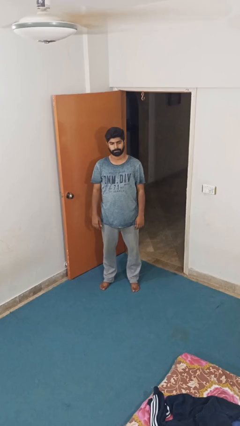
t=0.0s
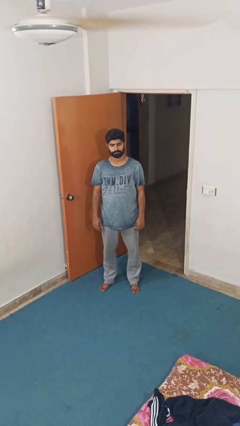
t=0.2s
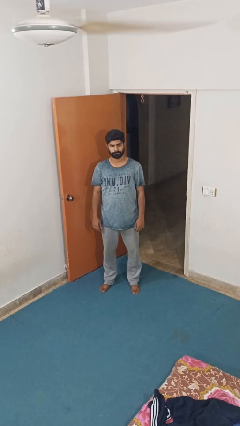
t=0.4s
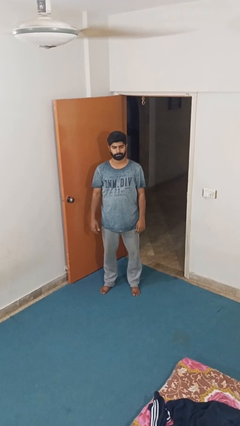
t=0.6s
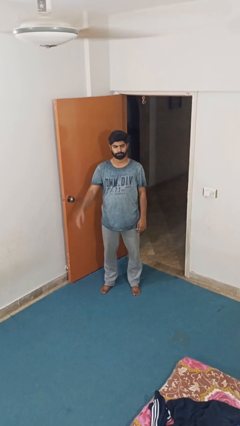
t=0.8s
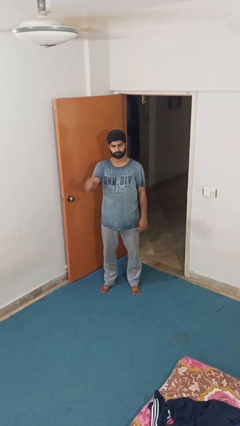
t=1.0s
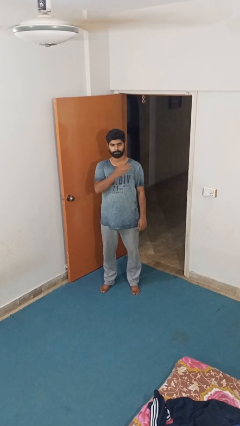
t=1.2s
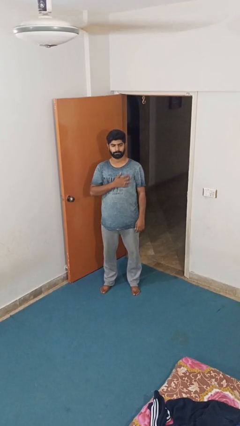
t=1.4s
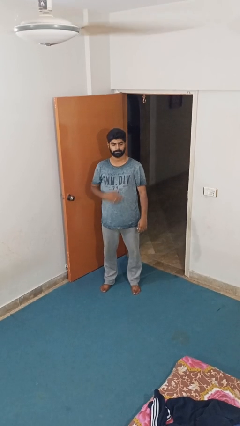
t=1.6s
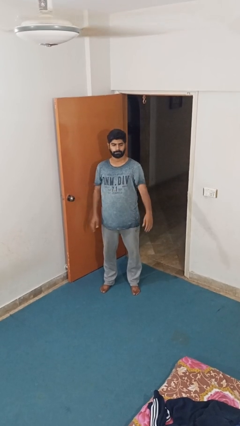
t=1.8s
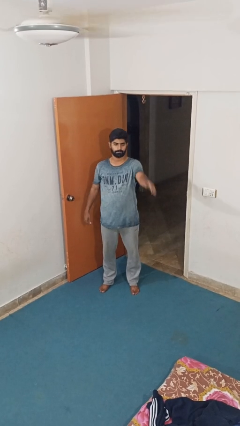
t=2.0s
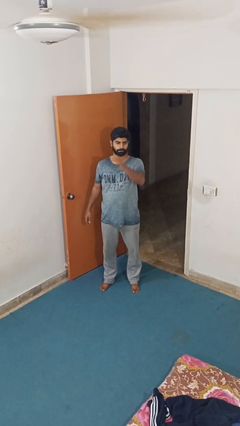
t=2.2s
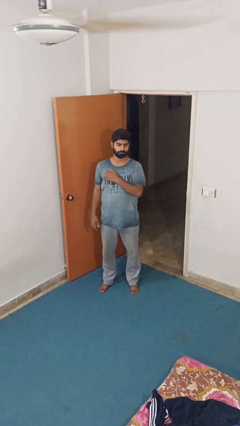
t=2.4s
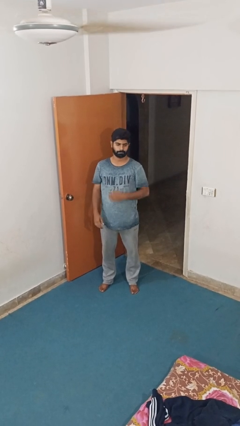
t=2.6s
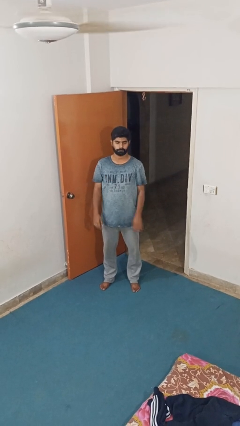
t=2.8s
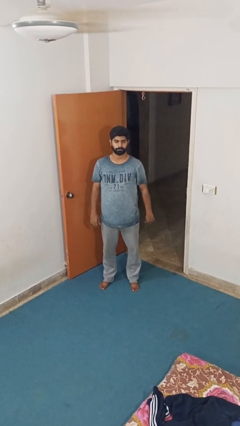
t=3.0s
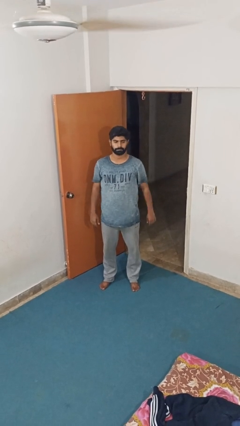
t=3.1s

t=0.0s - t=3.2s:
person drums on chest

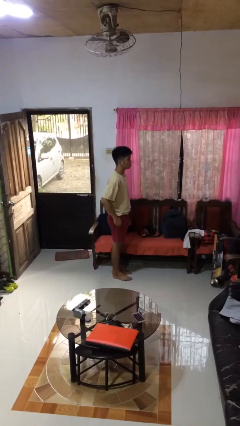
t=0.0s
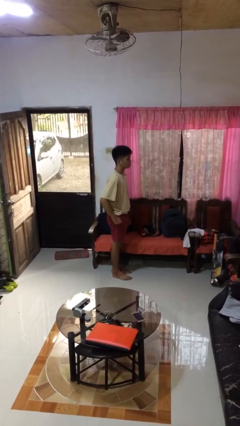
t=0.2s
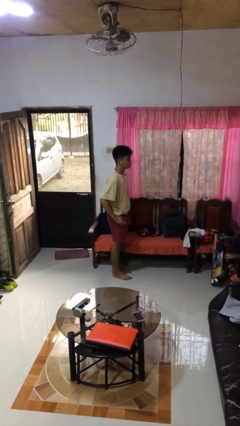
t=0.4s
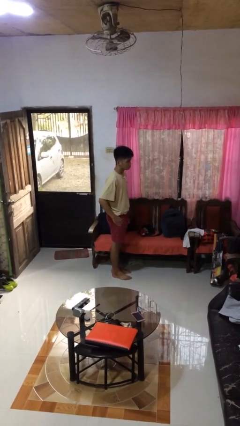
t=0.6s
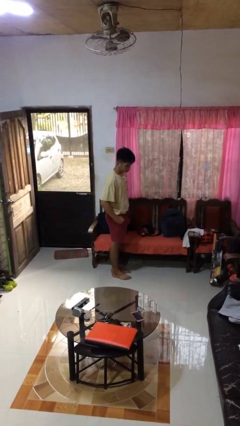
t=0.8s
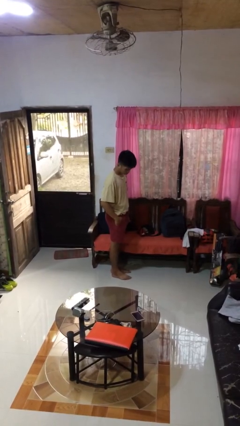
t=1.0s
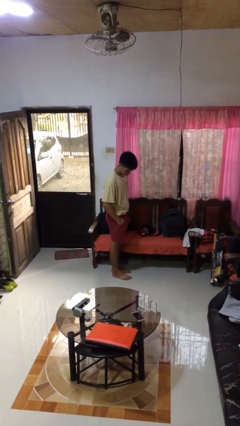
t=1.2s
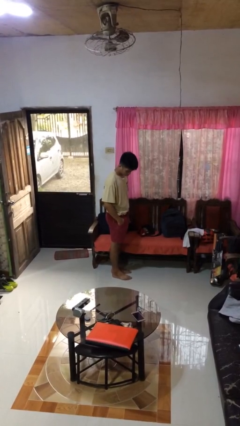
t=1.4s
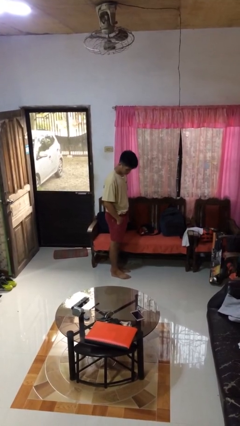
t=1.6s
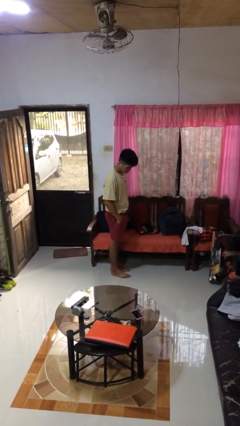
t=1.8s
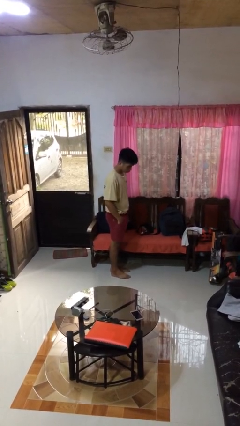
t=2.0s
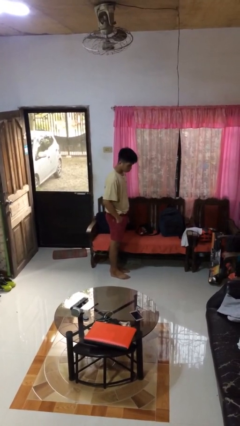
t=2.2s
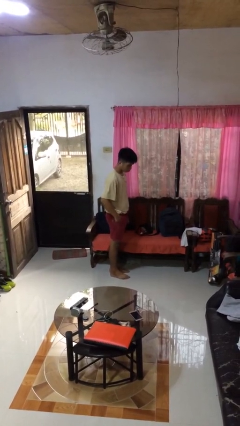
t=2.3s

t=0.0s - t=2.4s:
person puts hands in back pockets

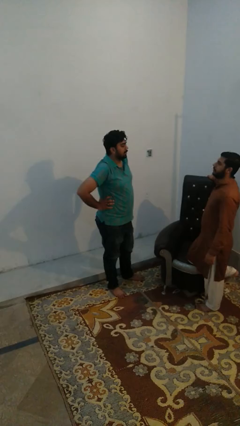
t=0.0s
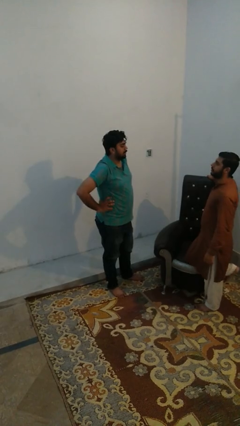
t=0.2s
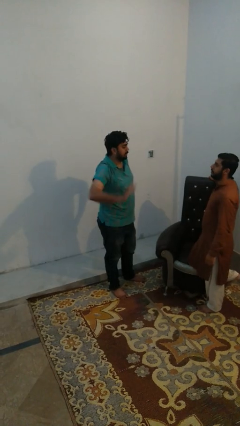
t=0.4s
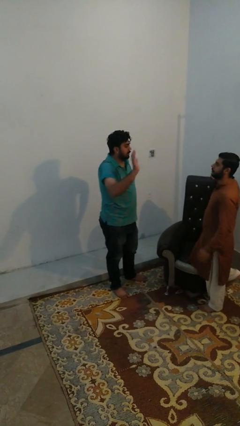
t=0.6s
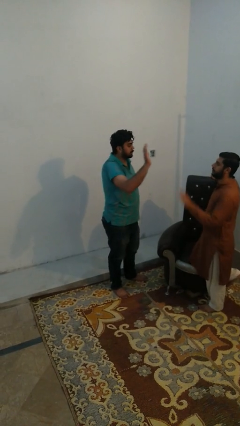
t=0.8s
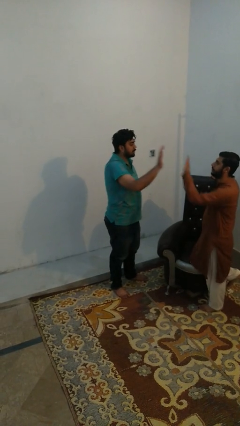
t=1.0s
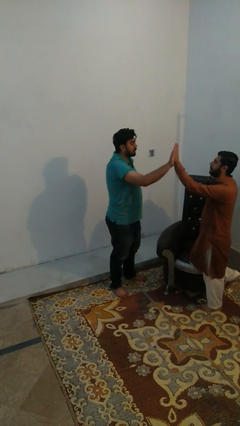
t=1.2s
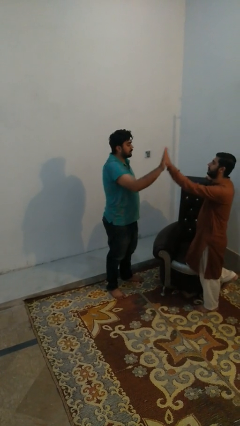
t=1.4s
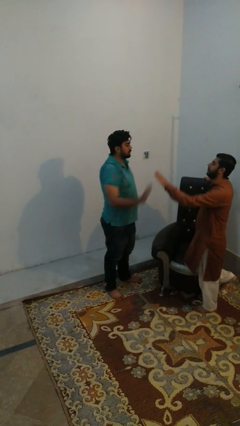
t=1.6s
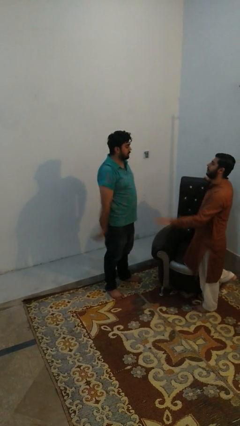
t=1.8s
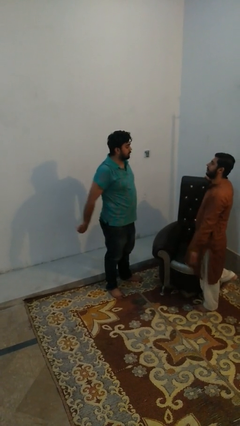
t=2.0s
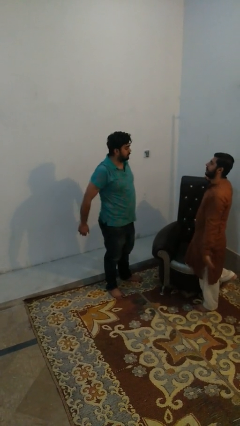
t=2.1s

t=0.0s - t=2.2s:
person highfives hand

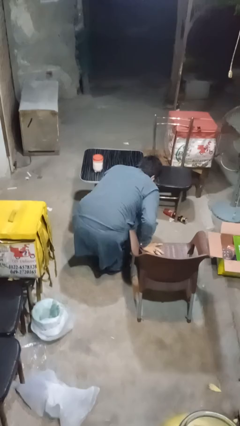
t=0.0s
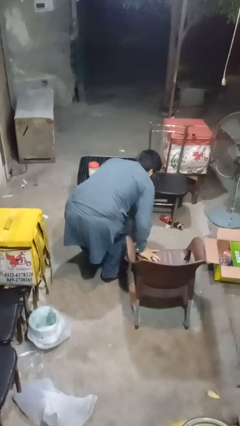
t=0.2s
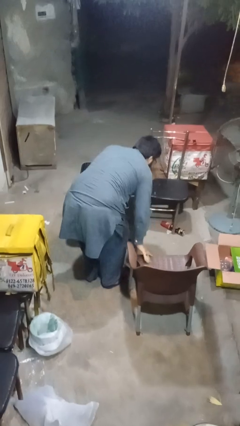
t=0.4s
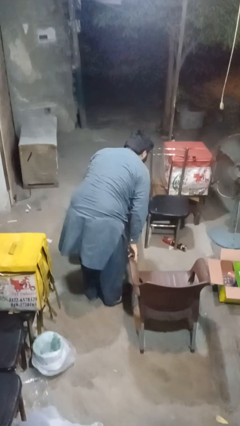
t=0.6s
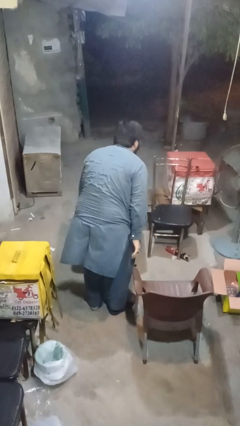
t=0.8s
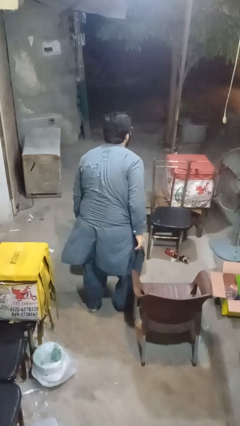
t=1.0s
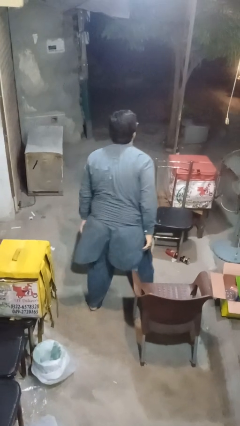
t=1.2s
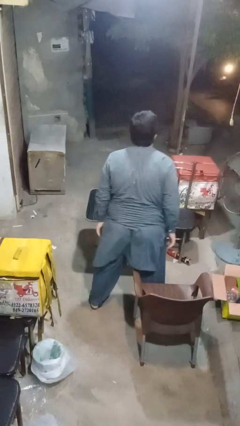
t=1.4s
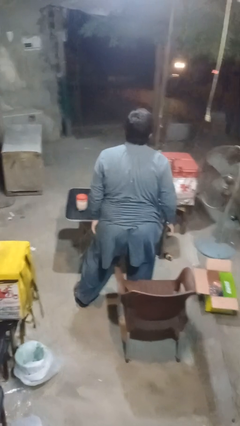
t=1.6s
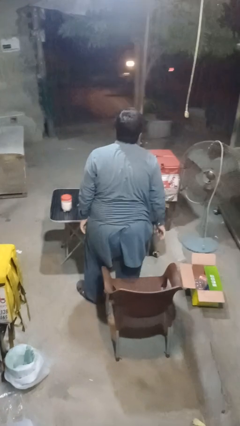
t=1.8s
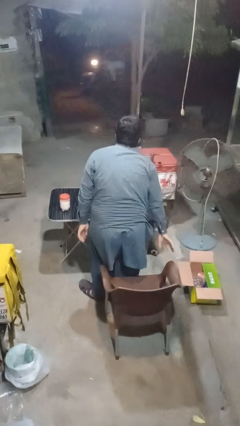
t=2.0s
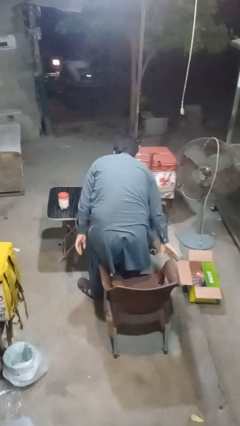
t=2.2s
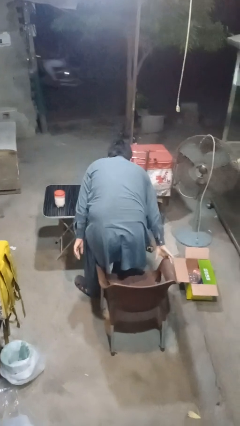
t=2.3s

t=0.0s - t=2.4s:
person stands up from floor

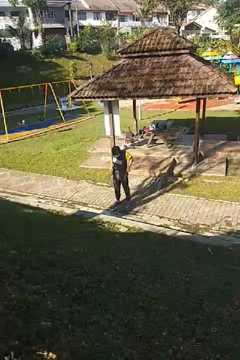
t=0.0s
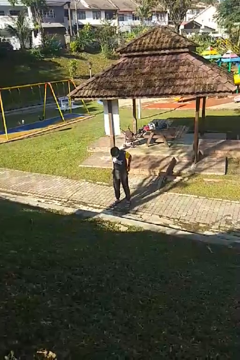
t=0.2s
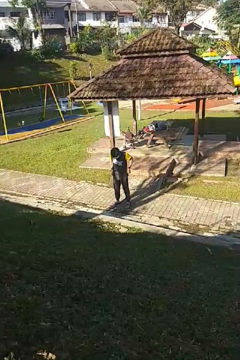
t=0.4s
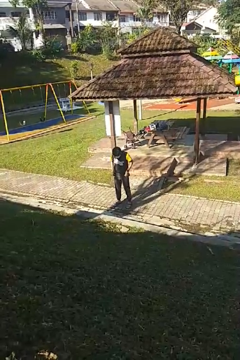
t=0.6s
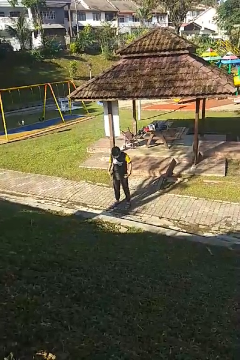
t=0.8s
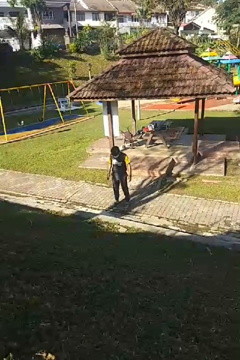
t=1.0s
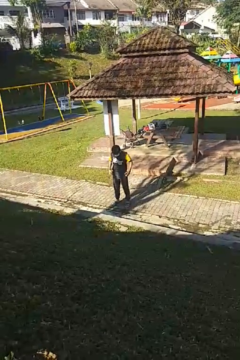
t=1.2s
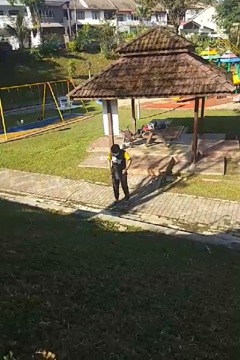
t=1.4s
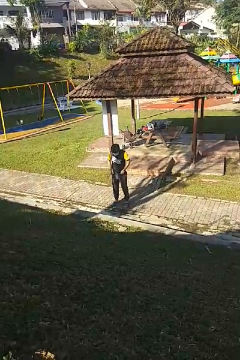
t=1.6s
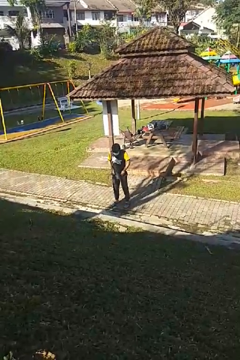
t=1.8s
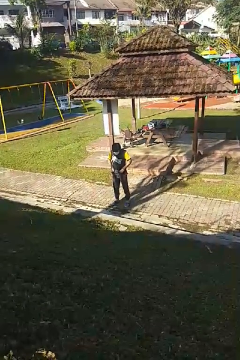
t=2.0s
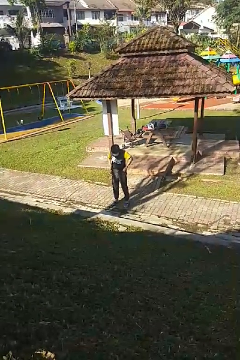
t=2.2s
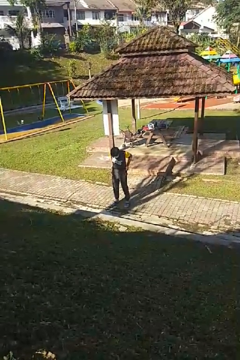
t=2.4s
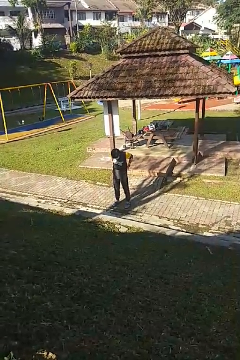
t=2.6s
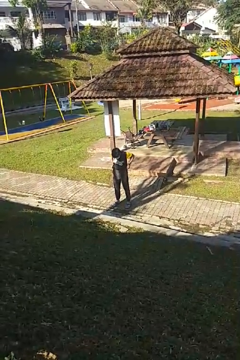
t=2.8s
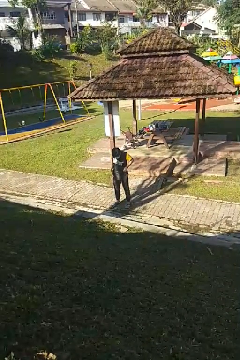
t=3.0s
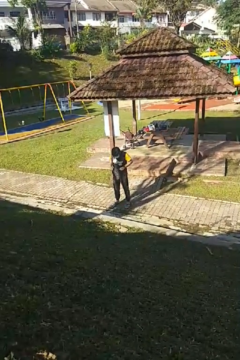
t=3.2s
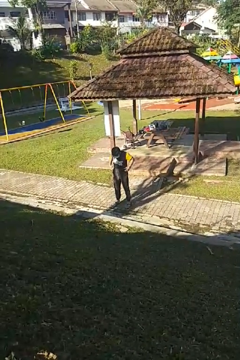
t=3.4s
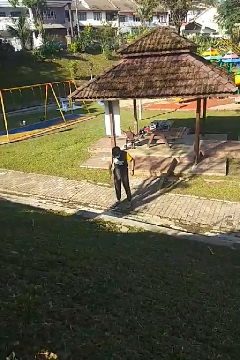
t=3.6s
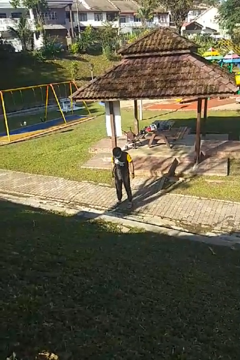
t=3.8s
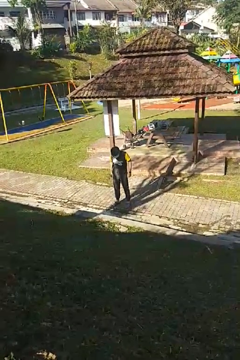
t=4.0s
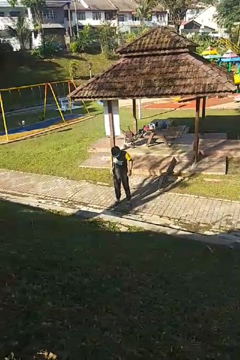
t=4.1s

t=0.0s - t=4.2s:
person hikes up pants

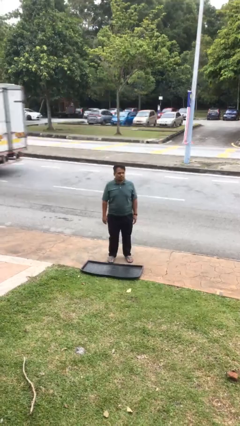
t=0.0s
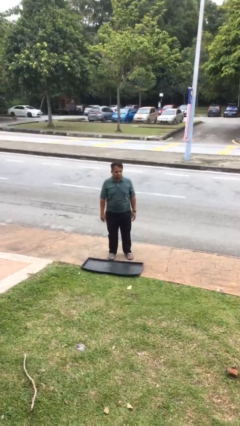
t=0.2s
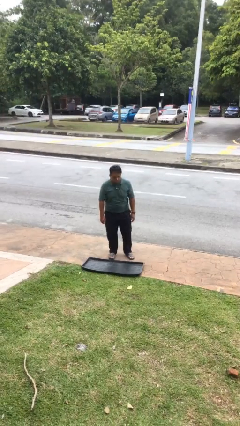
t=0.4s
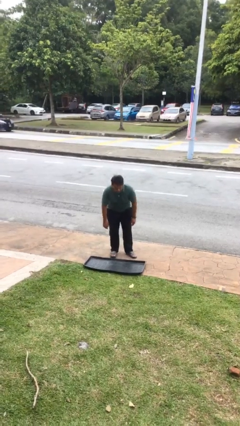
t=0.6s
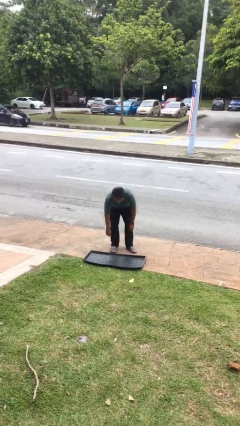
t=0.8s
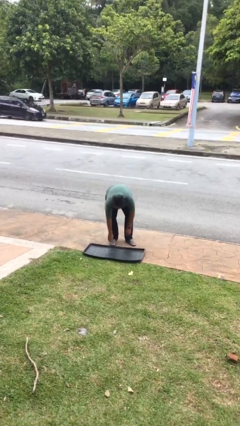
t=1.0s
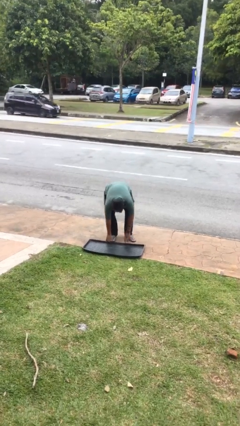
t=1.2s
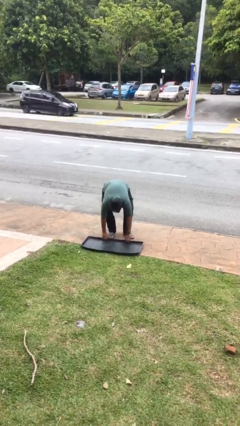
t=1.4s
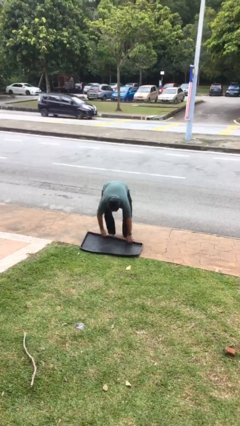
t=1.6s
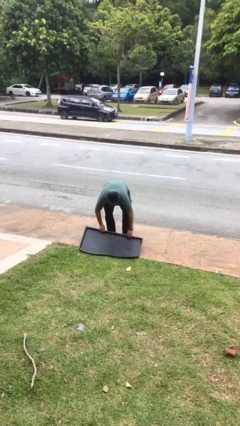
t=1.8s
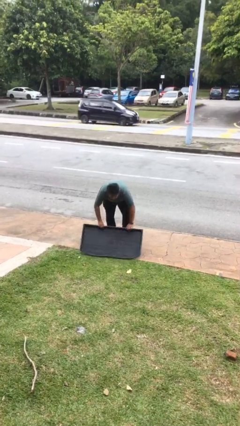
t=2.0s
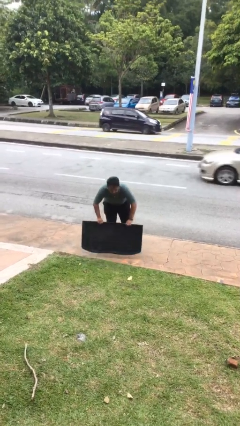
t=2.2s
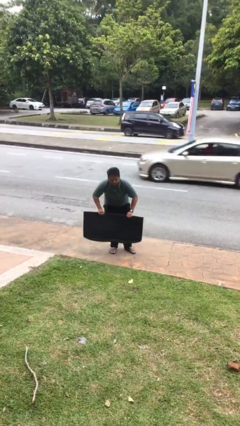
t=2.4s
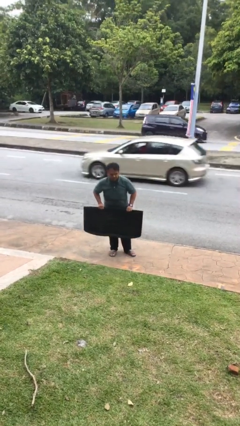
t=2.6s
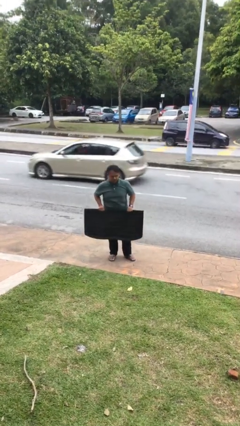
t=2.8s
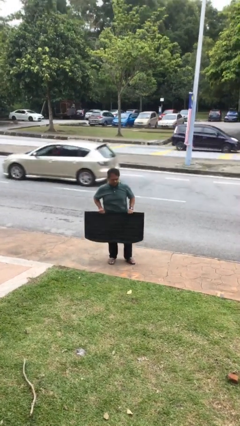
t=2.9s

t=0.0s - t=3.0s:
person picks up object from floor

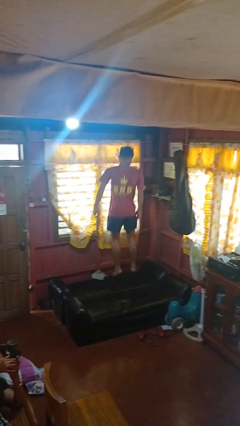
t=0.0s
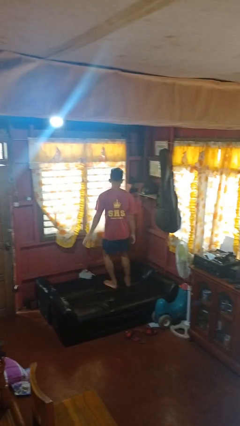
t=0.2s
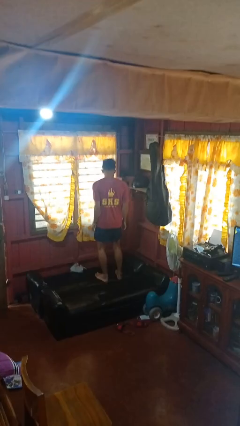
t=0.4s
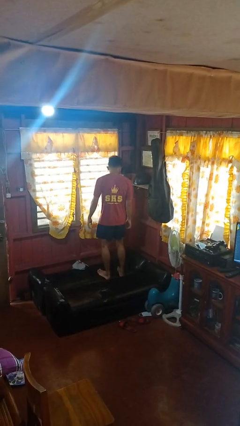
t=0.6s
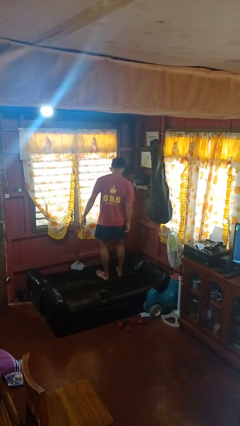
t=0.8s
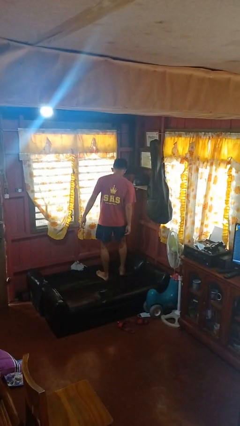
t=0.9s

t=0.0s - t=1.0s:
person jumps on couch
